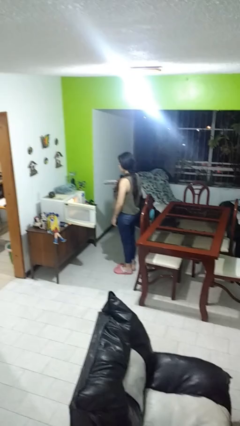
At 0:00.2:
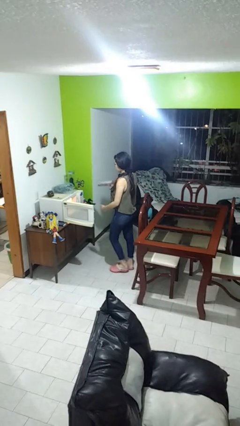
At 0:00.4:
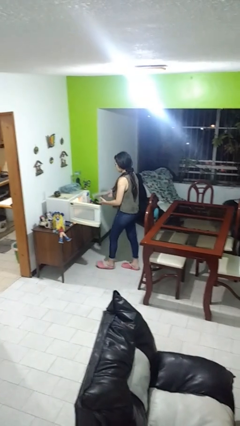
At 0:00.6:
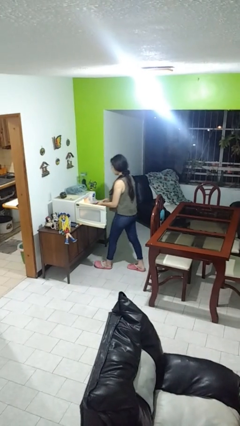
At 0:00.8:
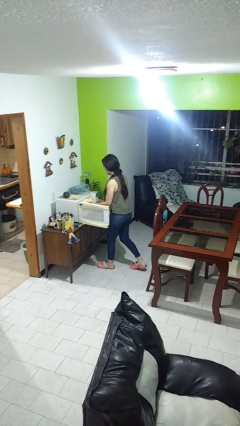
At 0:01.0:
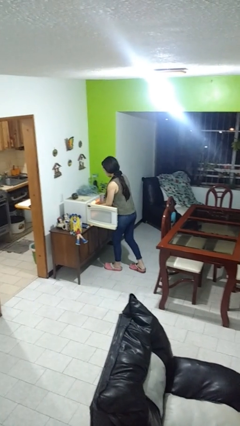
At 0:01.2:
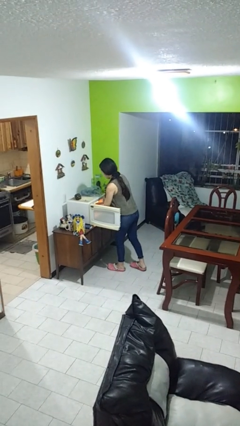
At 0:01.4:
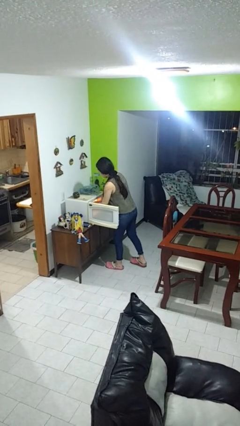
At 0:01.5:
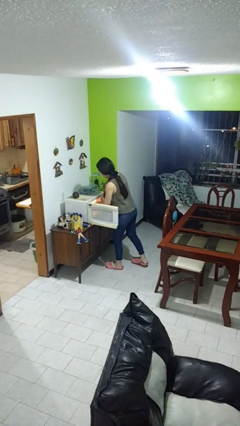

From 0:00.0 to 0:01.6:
person puts object into microwave

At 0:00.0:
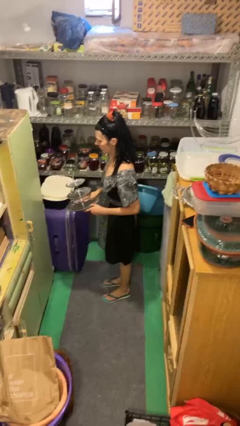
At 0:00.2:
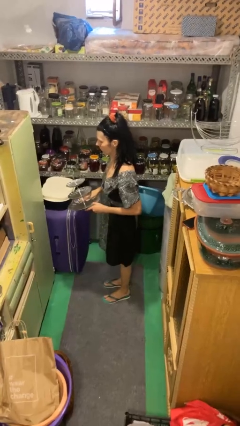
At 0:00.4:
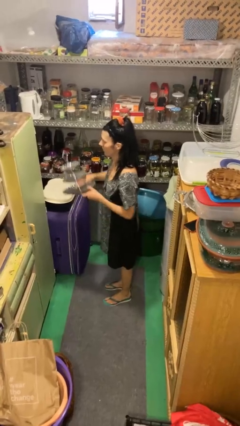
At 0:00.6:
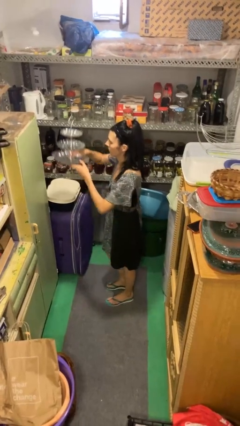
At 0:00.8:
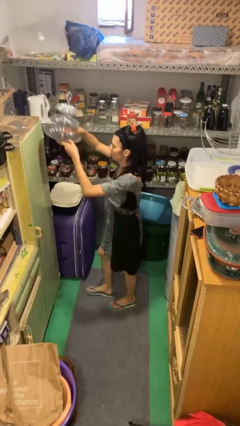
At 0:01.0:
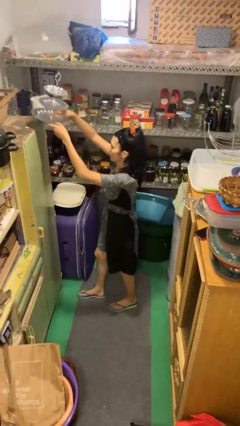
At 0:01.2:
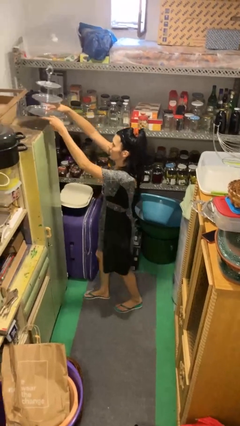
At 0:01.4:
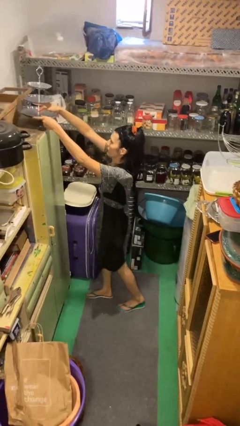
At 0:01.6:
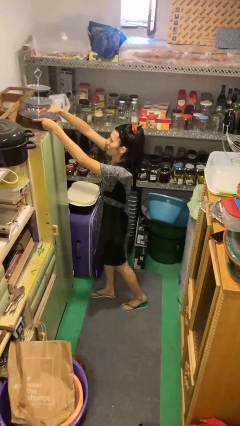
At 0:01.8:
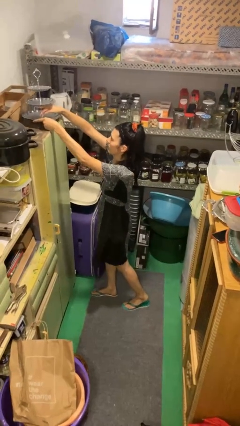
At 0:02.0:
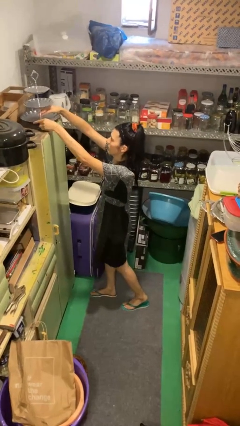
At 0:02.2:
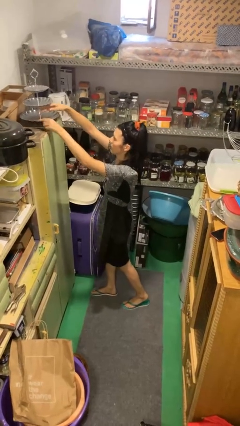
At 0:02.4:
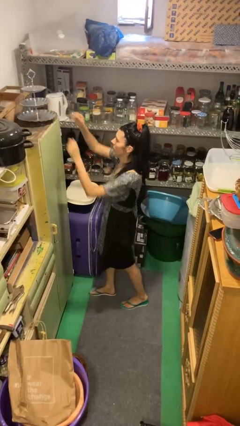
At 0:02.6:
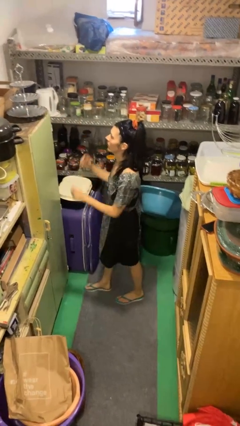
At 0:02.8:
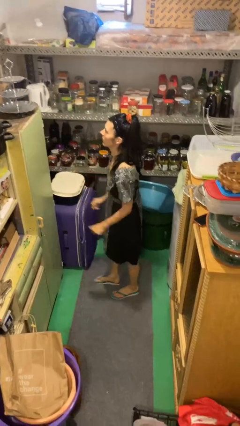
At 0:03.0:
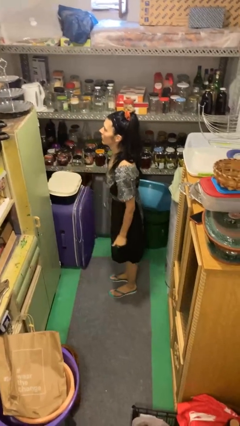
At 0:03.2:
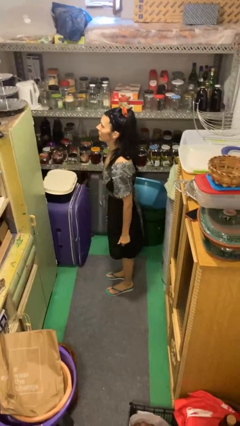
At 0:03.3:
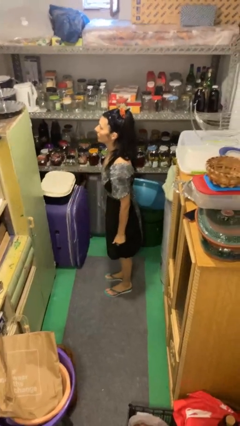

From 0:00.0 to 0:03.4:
person puts down object on countertop

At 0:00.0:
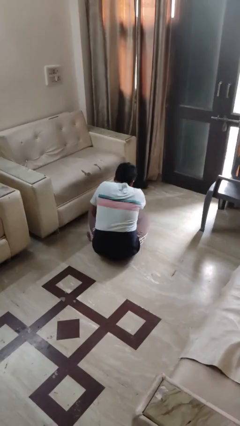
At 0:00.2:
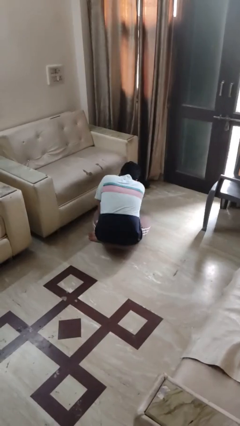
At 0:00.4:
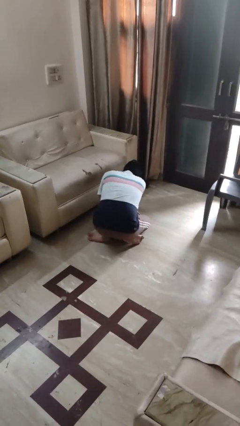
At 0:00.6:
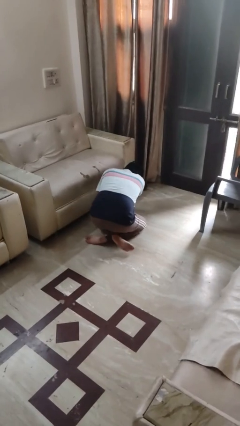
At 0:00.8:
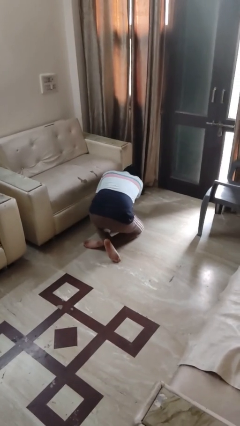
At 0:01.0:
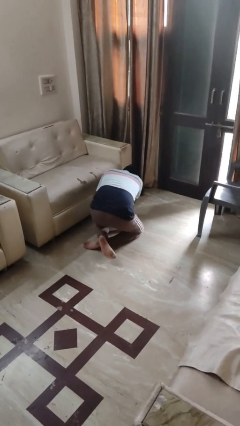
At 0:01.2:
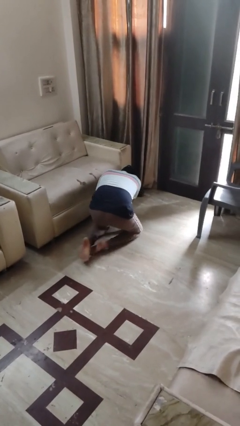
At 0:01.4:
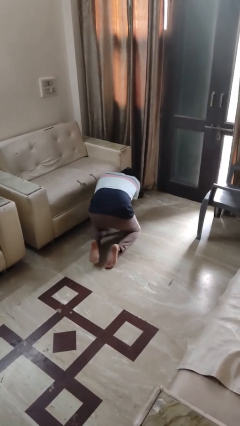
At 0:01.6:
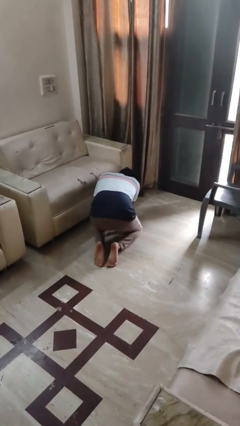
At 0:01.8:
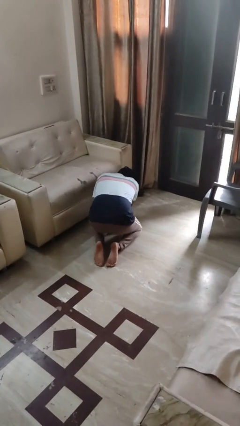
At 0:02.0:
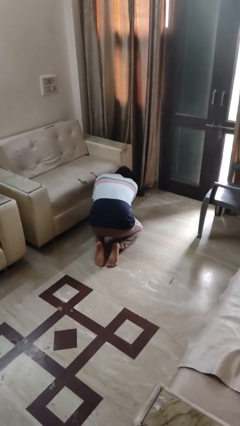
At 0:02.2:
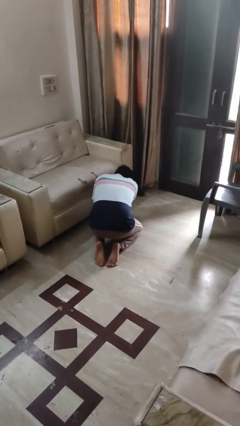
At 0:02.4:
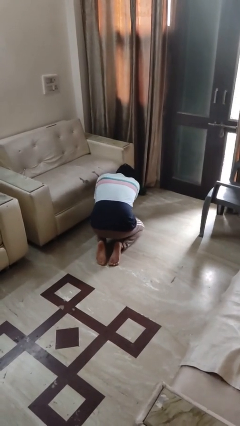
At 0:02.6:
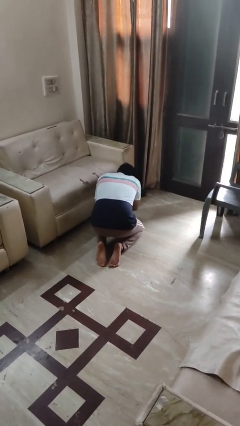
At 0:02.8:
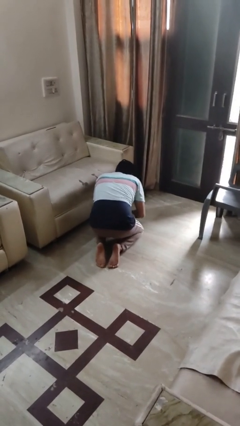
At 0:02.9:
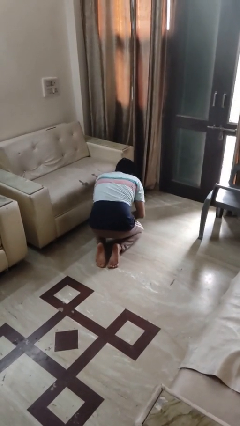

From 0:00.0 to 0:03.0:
person searches under couch

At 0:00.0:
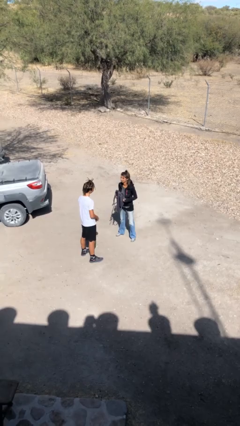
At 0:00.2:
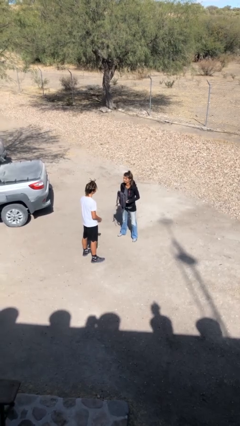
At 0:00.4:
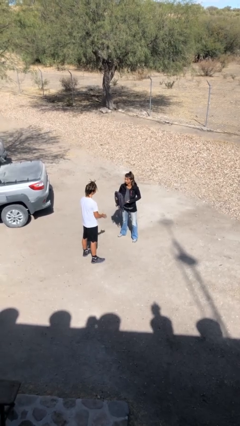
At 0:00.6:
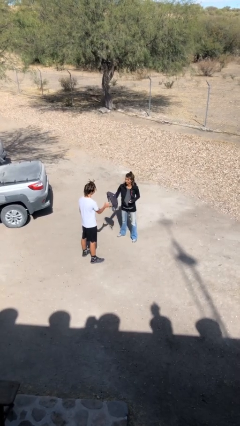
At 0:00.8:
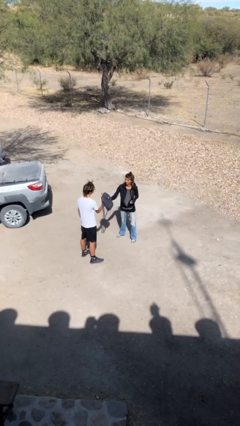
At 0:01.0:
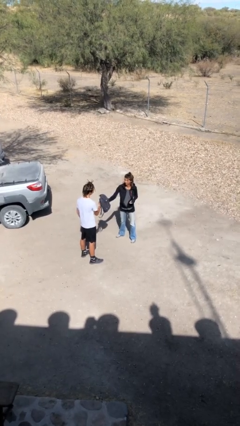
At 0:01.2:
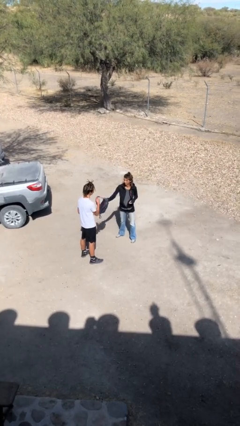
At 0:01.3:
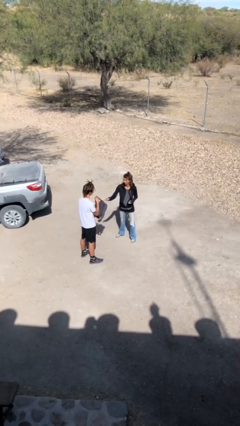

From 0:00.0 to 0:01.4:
person transfers object to person

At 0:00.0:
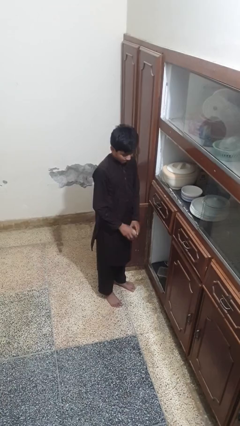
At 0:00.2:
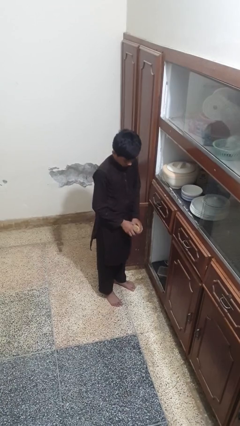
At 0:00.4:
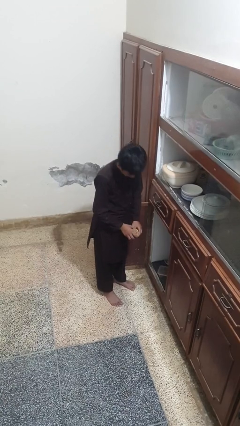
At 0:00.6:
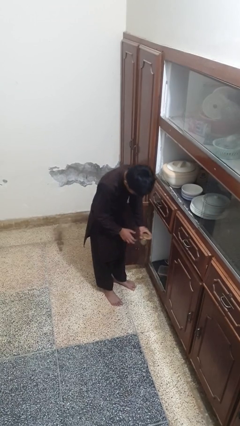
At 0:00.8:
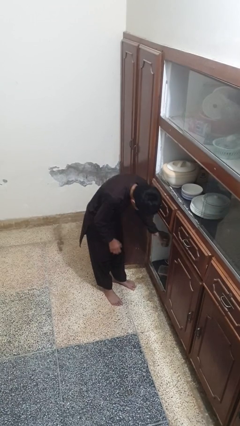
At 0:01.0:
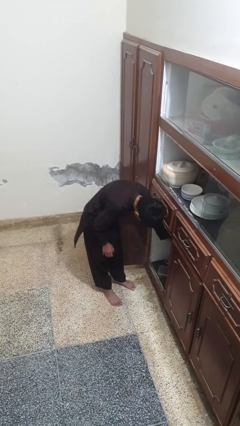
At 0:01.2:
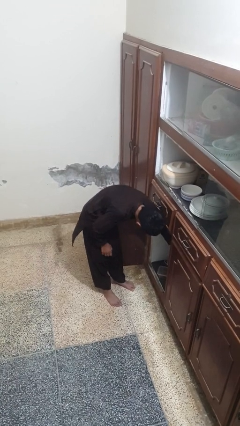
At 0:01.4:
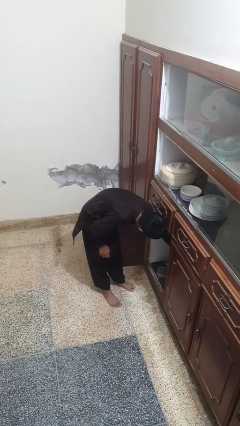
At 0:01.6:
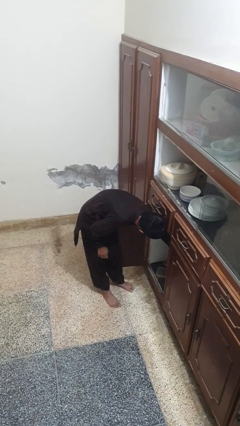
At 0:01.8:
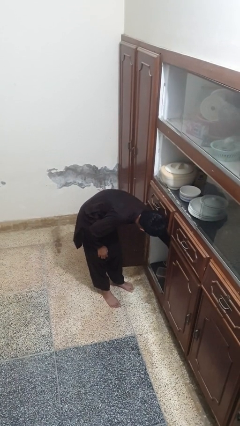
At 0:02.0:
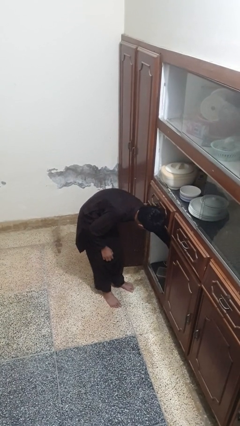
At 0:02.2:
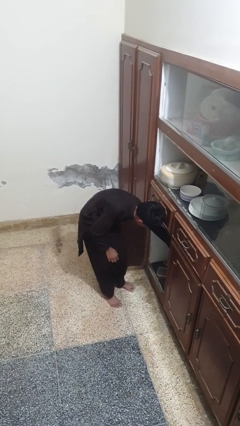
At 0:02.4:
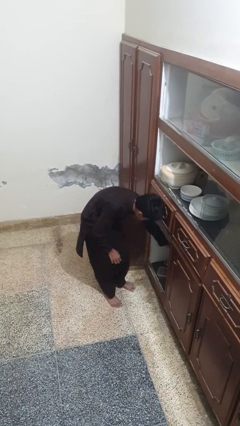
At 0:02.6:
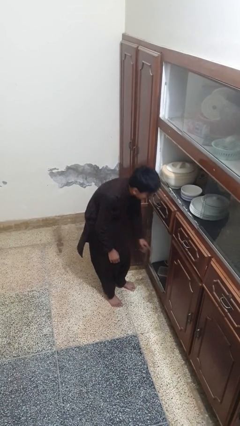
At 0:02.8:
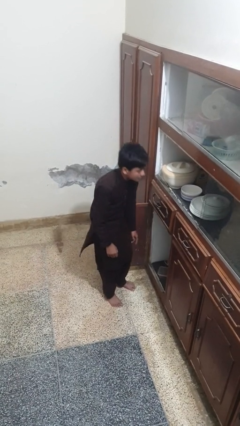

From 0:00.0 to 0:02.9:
person puts object in cabinet

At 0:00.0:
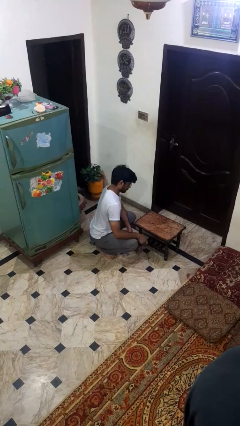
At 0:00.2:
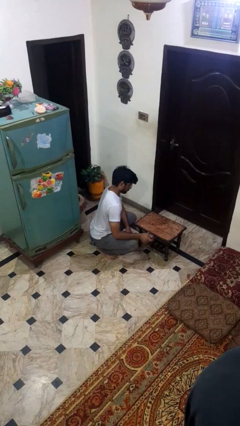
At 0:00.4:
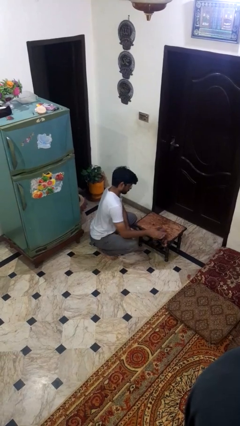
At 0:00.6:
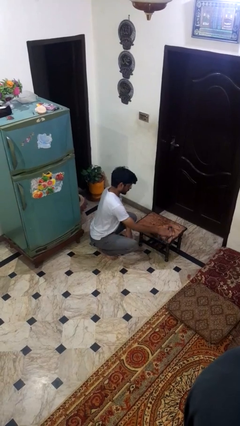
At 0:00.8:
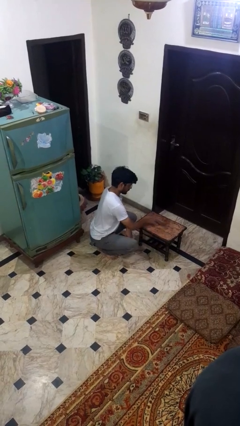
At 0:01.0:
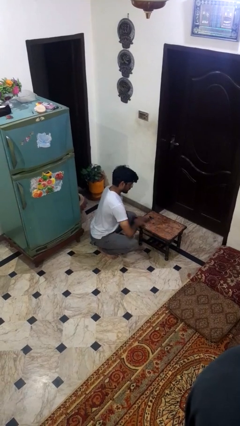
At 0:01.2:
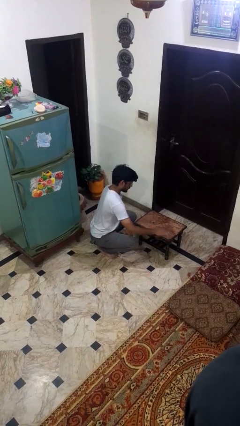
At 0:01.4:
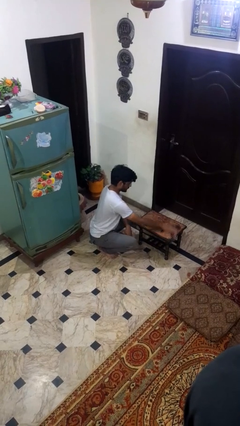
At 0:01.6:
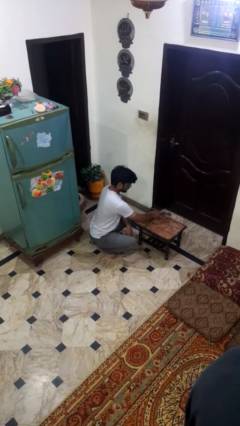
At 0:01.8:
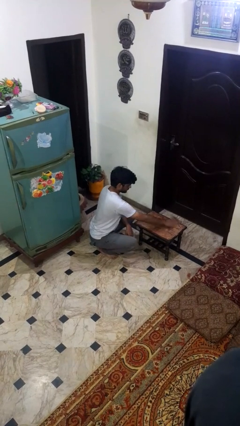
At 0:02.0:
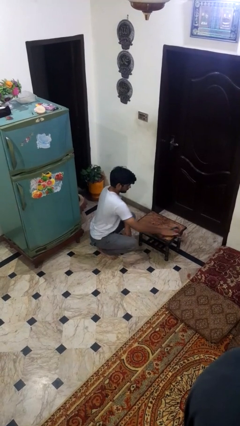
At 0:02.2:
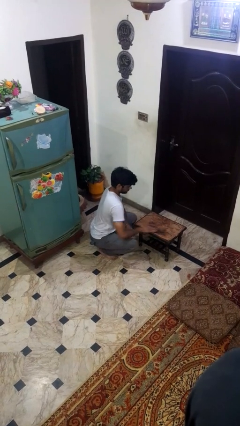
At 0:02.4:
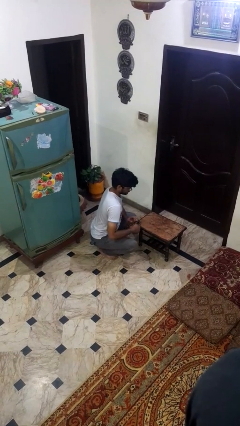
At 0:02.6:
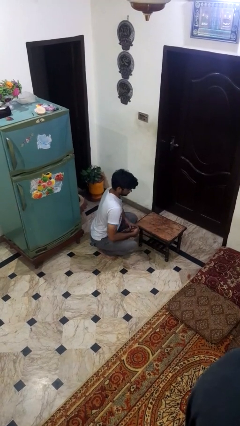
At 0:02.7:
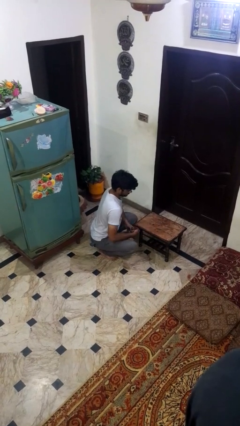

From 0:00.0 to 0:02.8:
person cleans table with rag

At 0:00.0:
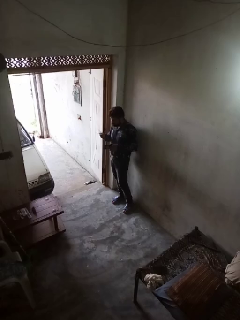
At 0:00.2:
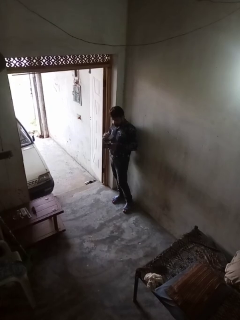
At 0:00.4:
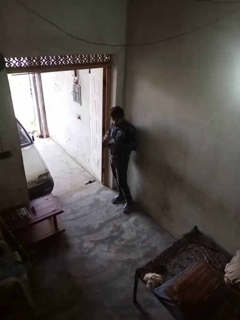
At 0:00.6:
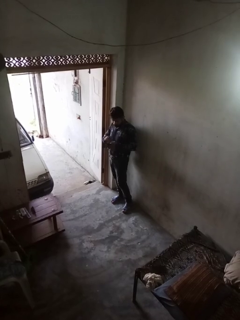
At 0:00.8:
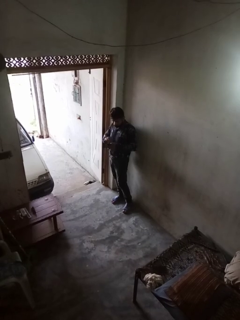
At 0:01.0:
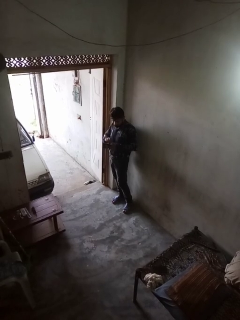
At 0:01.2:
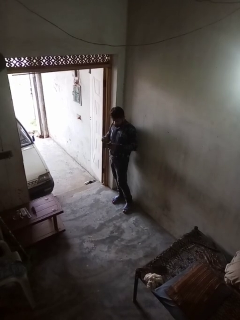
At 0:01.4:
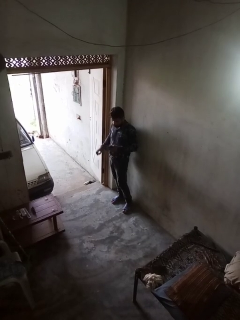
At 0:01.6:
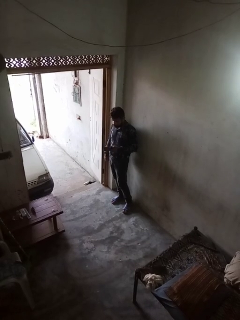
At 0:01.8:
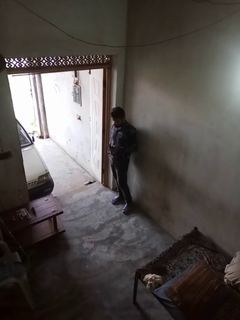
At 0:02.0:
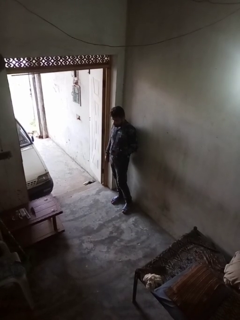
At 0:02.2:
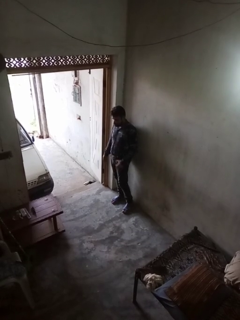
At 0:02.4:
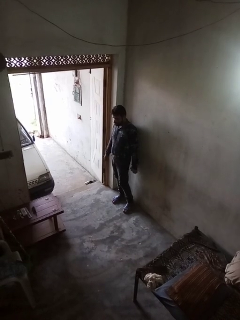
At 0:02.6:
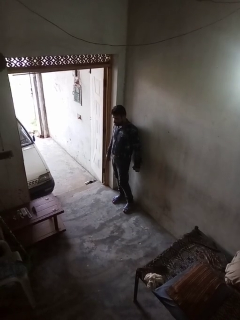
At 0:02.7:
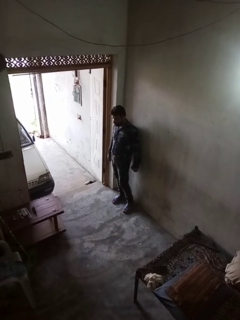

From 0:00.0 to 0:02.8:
person puts object into purse
